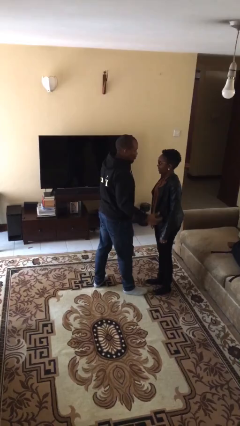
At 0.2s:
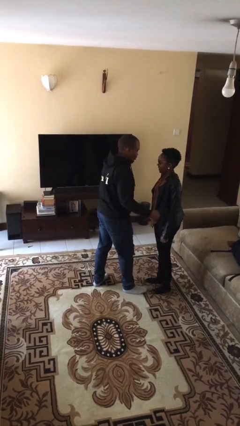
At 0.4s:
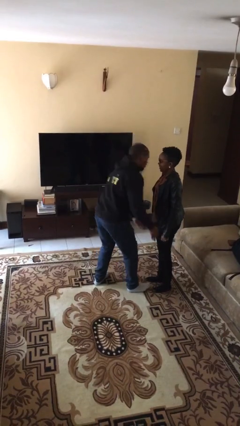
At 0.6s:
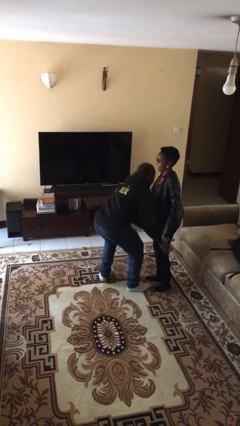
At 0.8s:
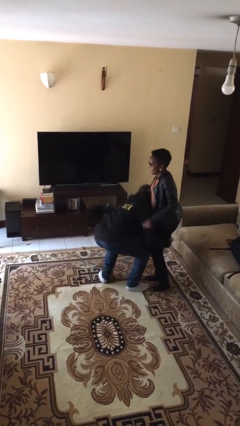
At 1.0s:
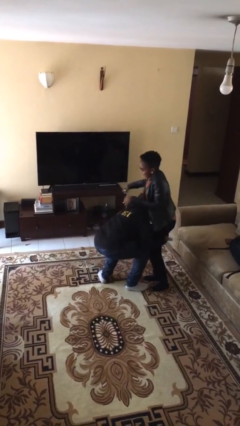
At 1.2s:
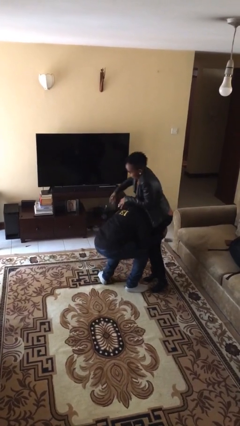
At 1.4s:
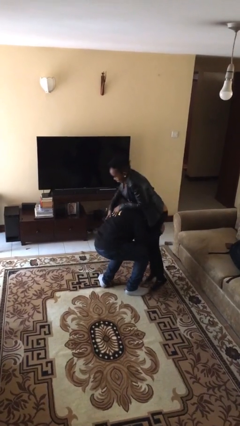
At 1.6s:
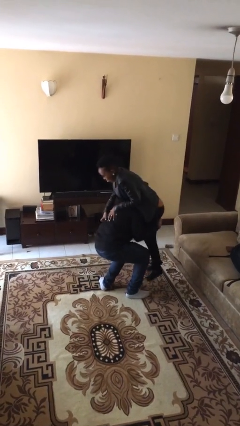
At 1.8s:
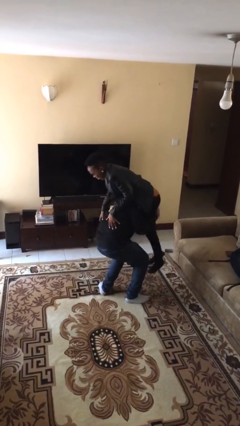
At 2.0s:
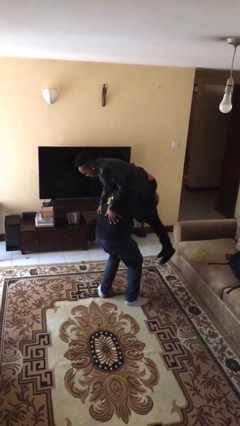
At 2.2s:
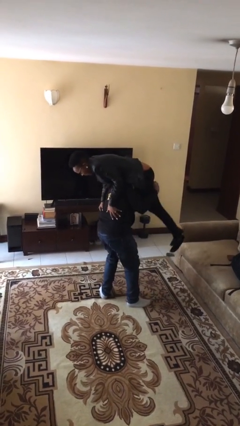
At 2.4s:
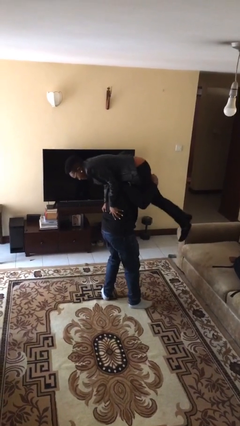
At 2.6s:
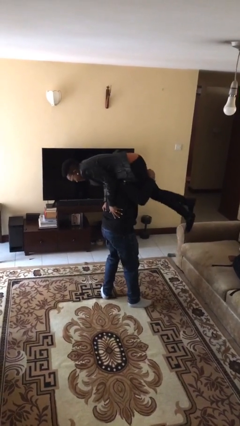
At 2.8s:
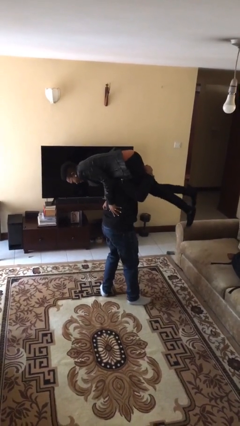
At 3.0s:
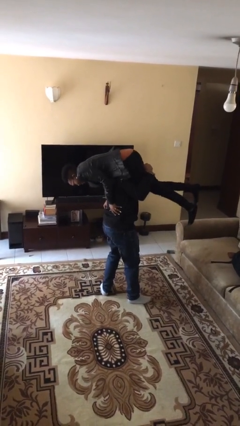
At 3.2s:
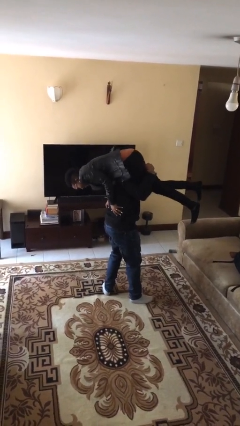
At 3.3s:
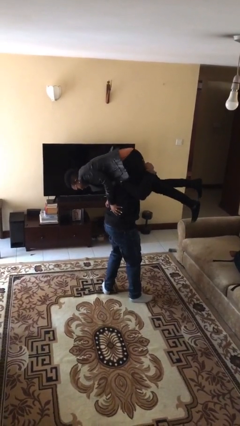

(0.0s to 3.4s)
person carries person over shoulder

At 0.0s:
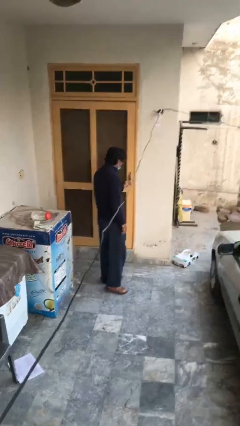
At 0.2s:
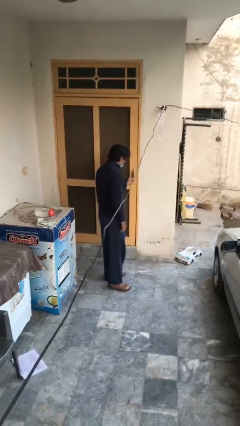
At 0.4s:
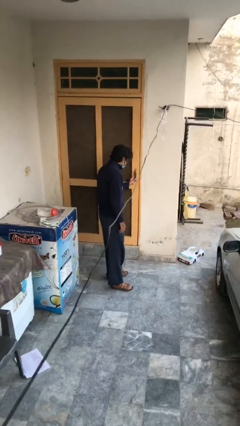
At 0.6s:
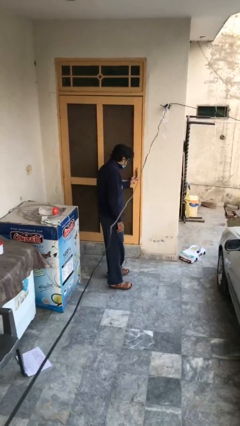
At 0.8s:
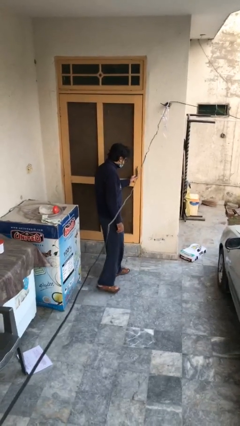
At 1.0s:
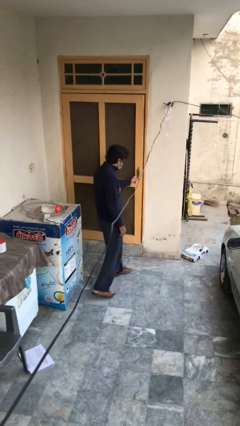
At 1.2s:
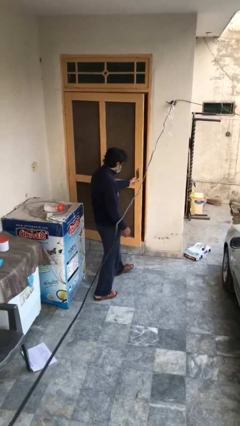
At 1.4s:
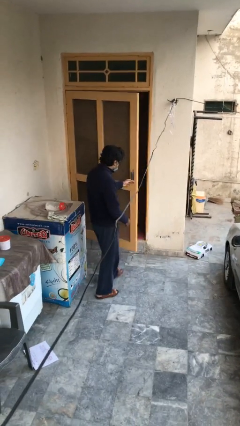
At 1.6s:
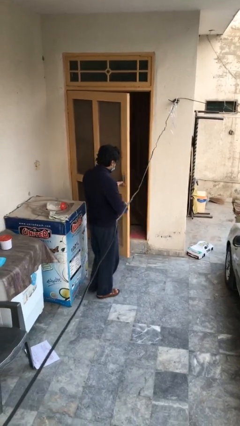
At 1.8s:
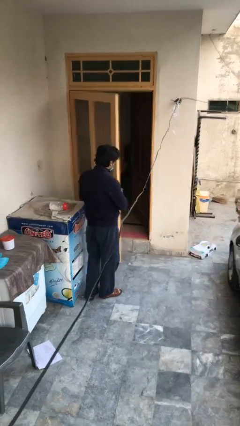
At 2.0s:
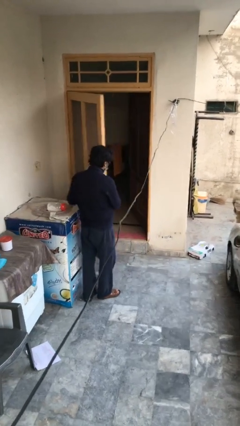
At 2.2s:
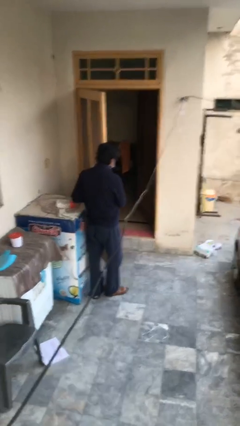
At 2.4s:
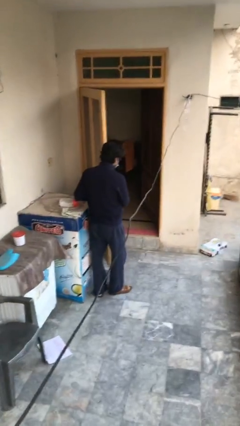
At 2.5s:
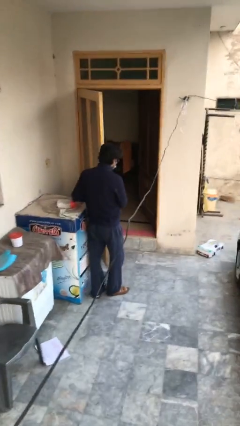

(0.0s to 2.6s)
person opens facility door

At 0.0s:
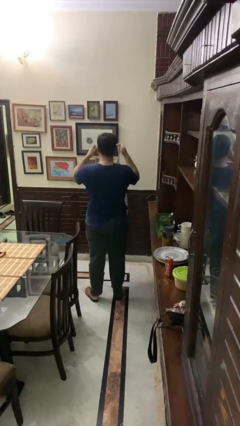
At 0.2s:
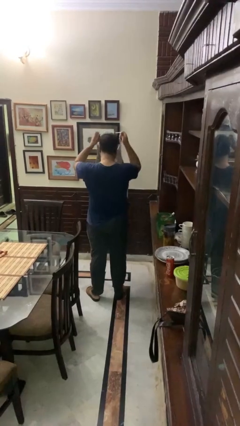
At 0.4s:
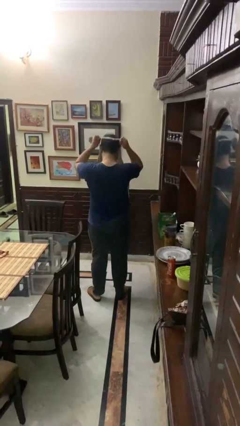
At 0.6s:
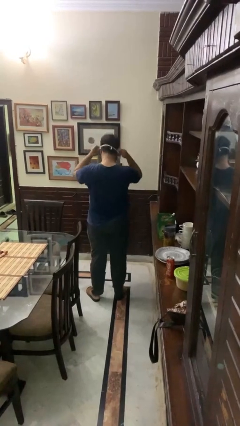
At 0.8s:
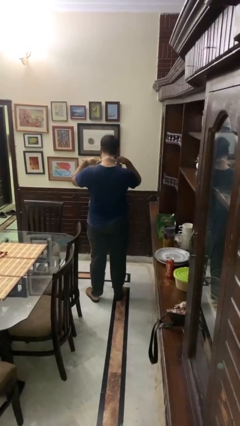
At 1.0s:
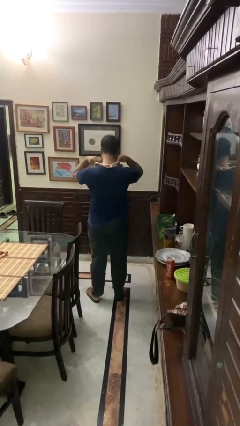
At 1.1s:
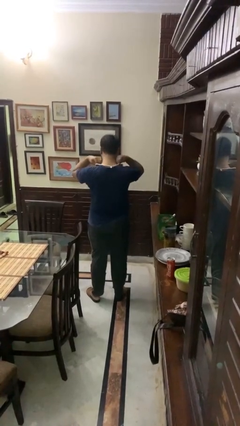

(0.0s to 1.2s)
person puts on apron

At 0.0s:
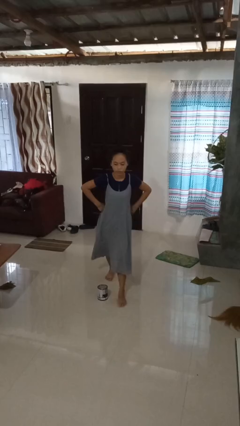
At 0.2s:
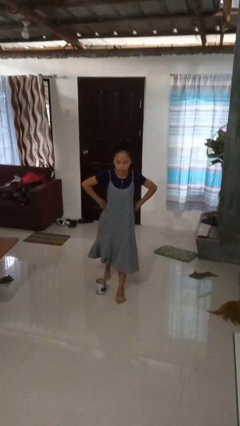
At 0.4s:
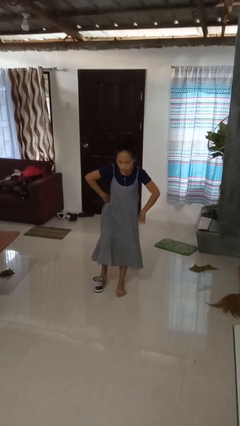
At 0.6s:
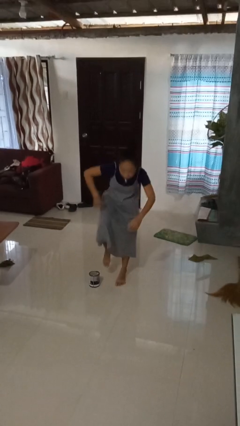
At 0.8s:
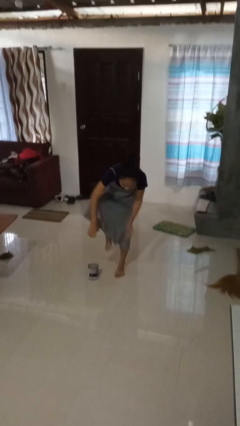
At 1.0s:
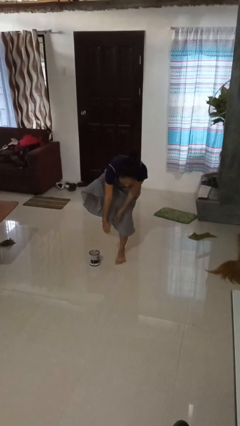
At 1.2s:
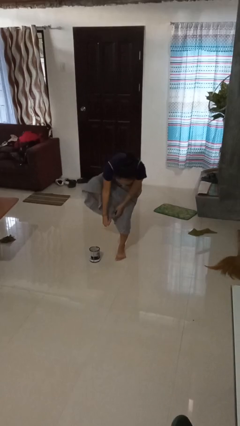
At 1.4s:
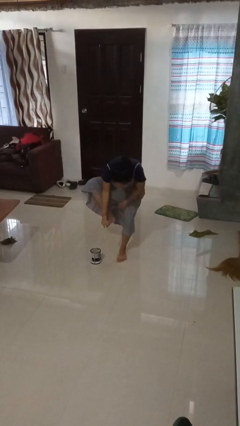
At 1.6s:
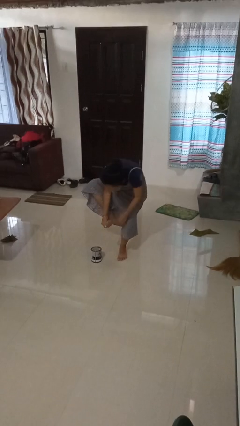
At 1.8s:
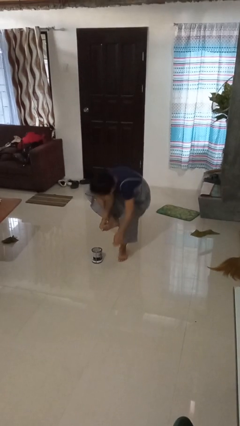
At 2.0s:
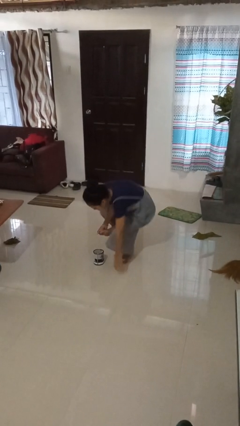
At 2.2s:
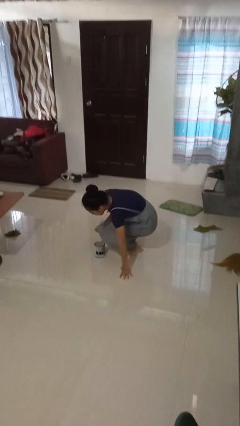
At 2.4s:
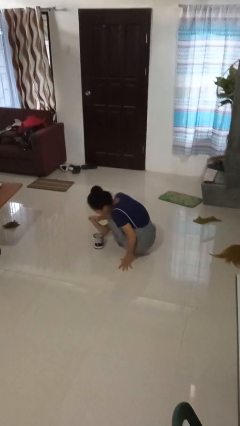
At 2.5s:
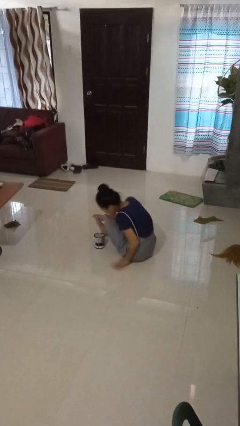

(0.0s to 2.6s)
person trips on object on floor

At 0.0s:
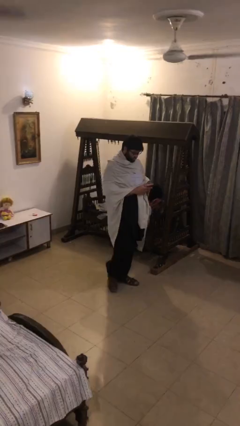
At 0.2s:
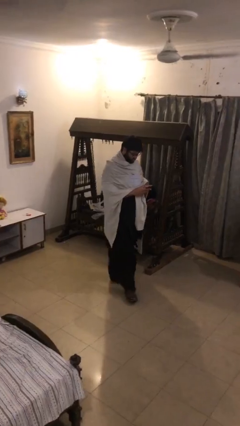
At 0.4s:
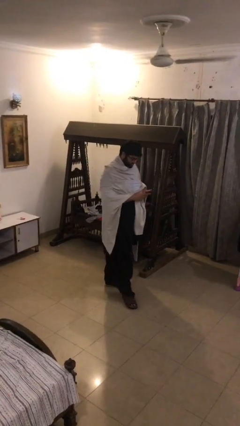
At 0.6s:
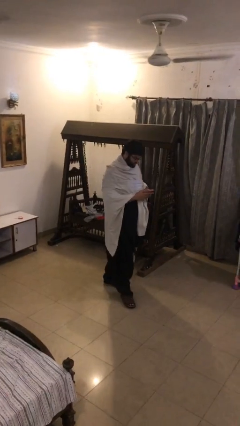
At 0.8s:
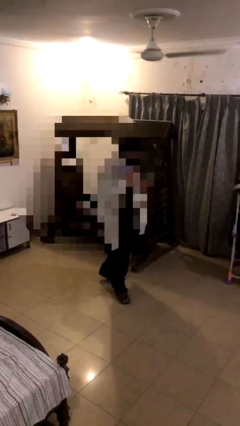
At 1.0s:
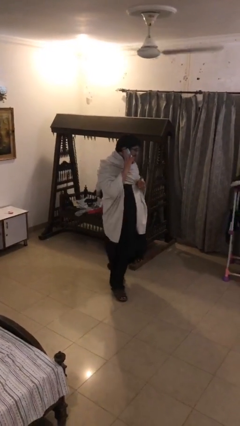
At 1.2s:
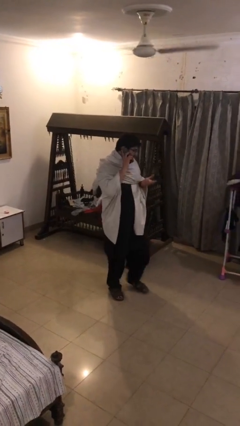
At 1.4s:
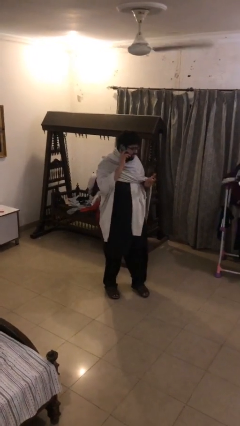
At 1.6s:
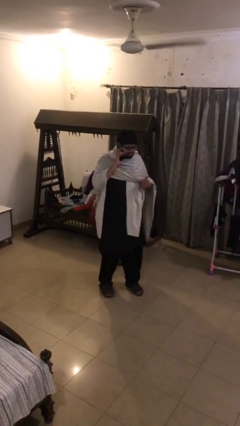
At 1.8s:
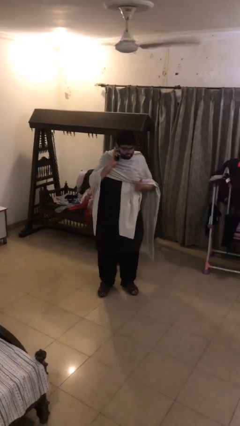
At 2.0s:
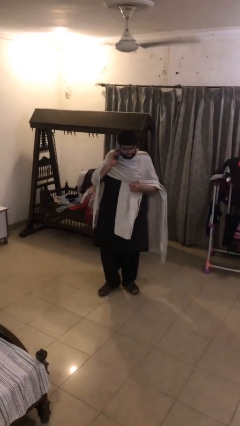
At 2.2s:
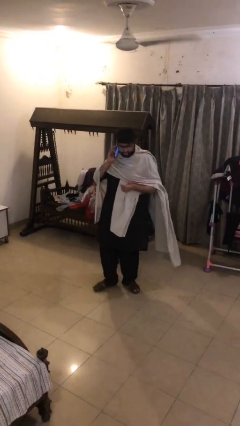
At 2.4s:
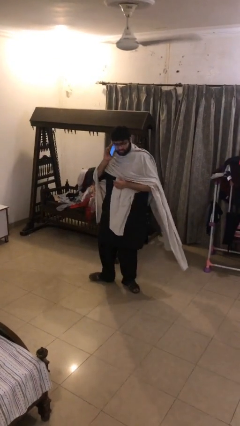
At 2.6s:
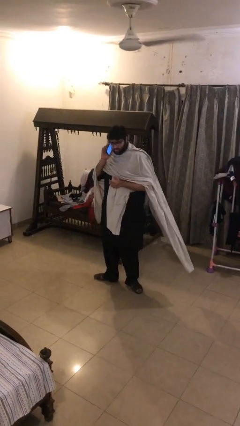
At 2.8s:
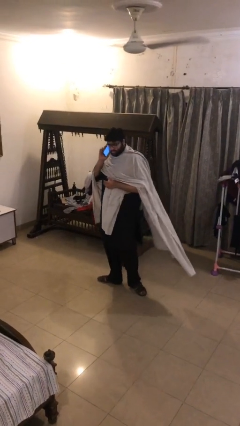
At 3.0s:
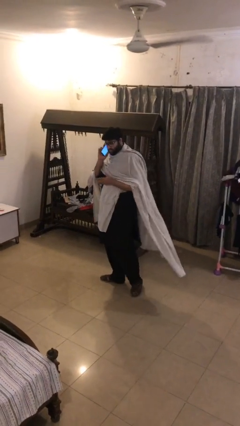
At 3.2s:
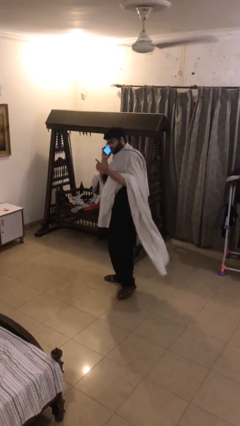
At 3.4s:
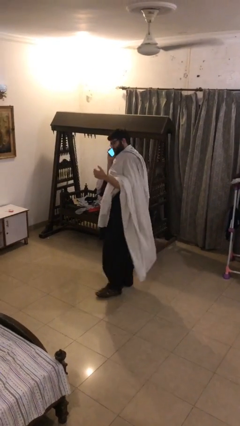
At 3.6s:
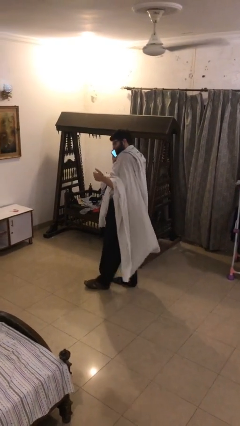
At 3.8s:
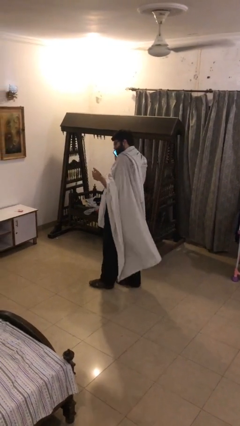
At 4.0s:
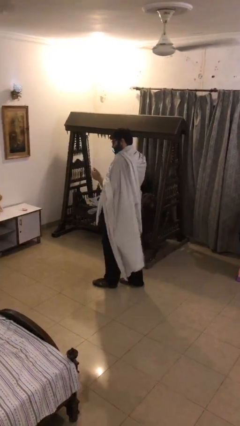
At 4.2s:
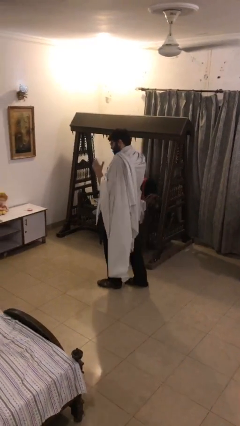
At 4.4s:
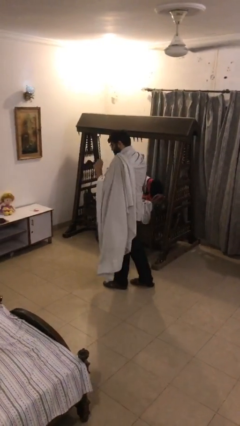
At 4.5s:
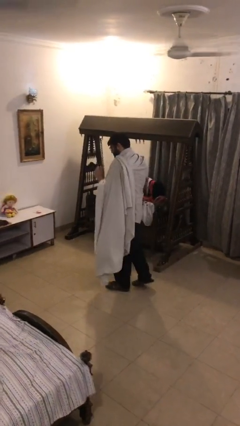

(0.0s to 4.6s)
person talks on phone

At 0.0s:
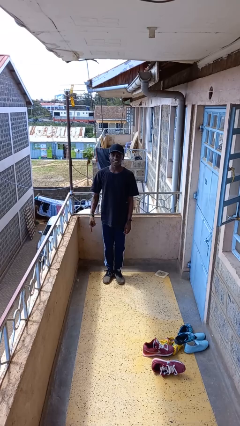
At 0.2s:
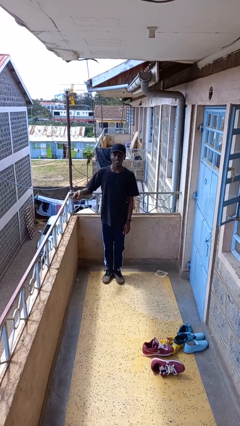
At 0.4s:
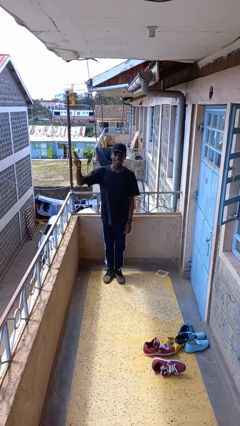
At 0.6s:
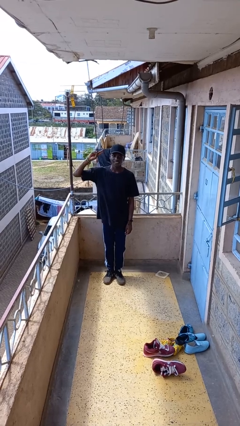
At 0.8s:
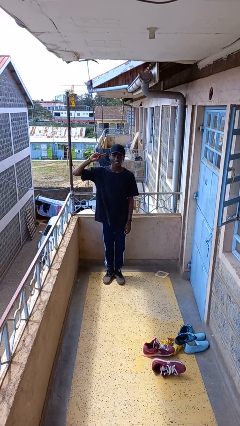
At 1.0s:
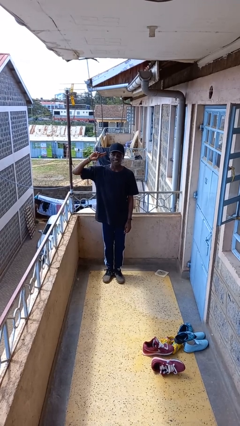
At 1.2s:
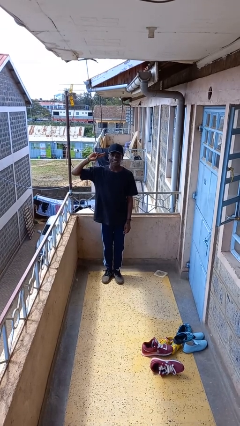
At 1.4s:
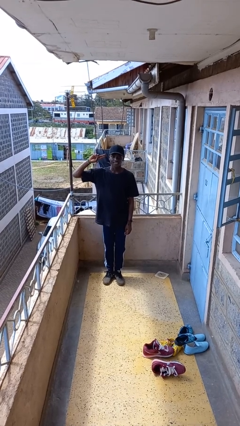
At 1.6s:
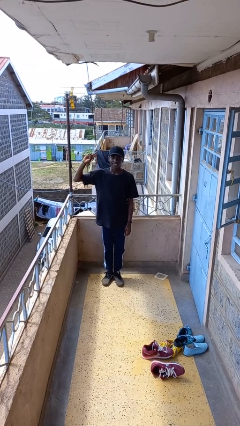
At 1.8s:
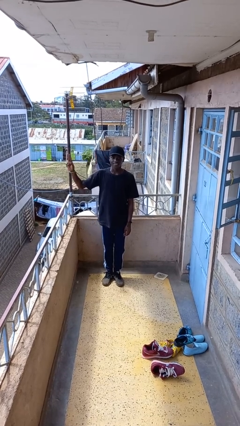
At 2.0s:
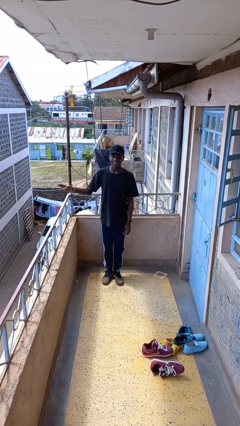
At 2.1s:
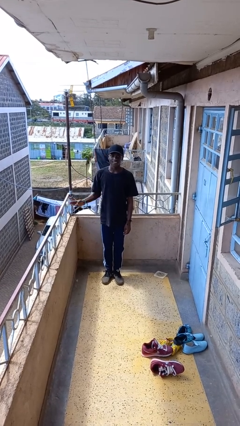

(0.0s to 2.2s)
person salutes

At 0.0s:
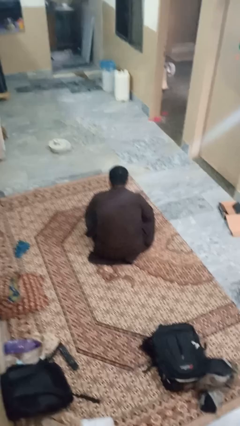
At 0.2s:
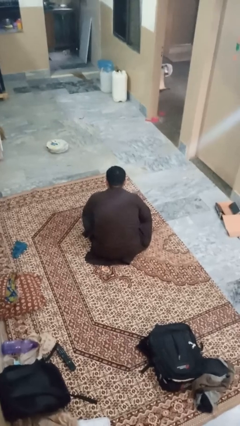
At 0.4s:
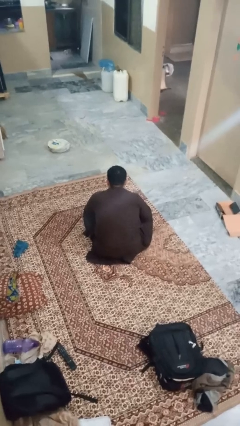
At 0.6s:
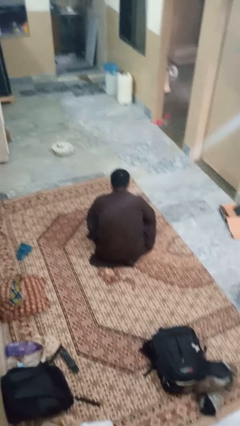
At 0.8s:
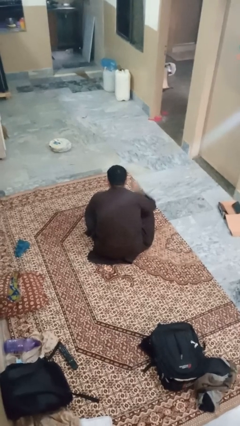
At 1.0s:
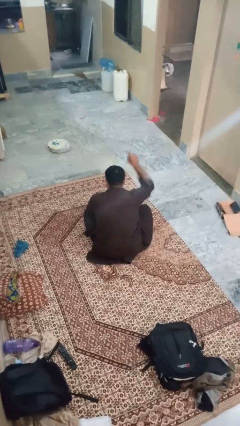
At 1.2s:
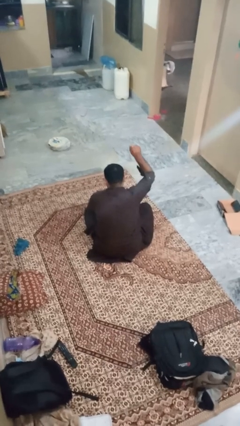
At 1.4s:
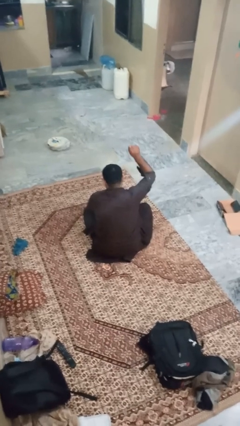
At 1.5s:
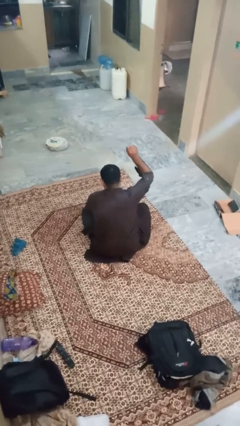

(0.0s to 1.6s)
person gestures number one
